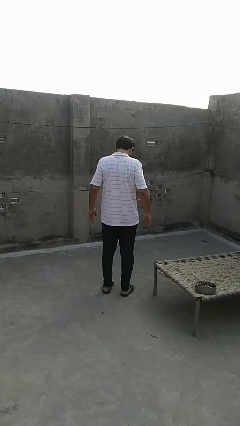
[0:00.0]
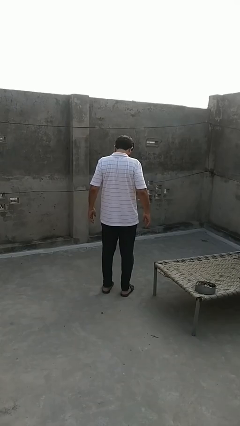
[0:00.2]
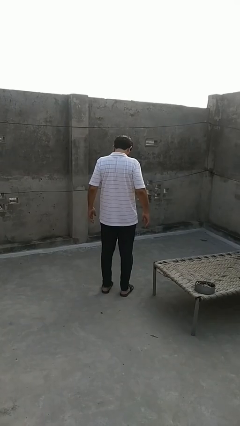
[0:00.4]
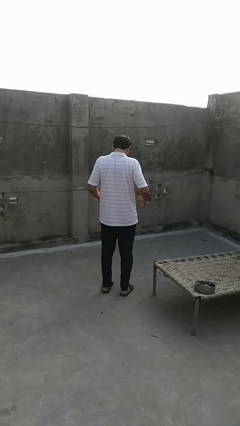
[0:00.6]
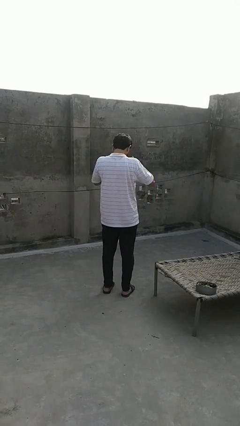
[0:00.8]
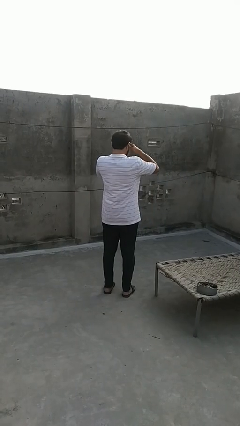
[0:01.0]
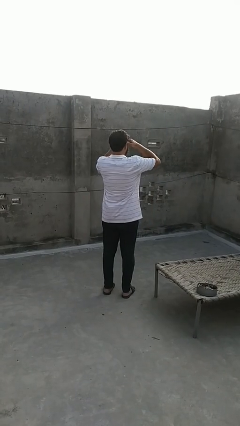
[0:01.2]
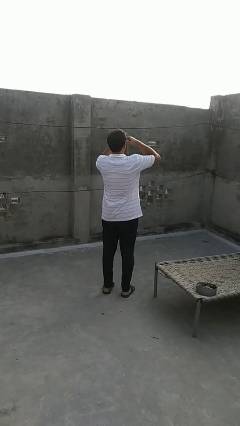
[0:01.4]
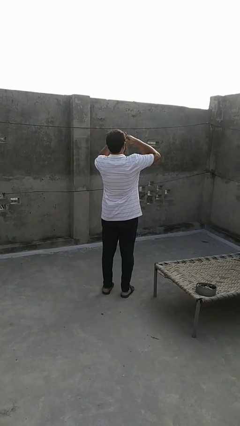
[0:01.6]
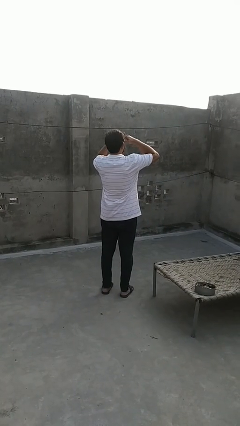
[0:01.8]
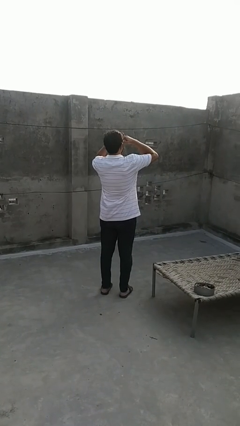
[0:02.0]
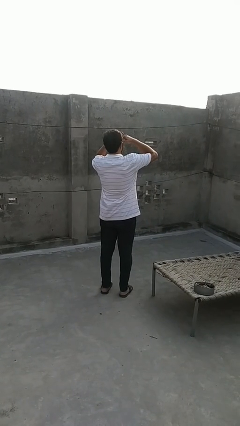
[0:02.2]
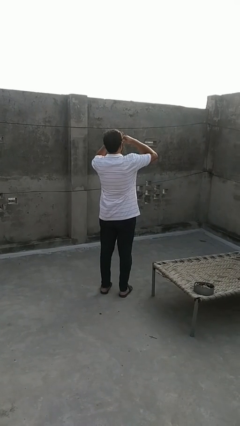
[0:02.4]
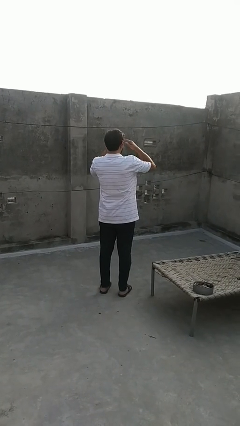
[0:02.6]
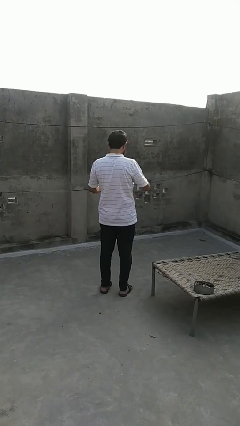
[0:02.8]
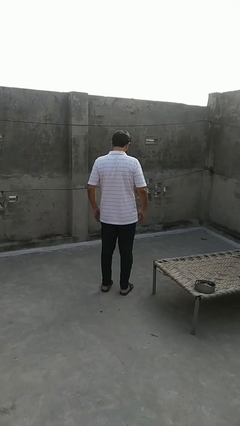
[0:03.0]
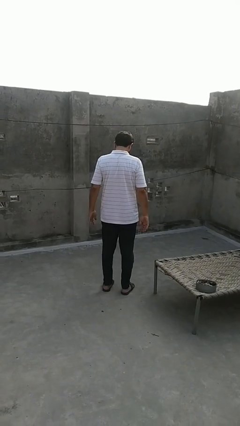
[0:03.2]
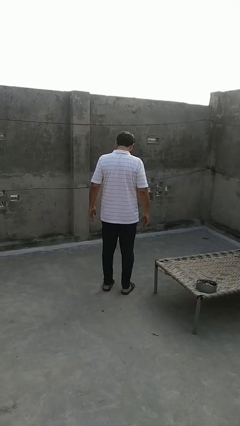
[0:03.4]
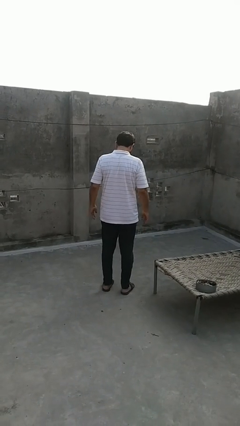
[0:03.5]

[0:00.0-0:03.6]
person shades eyes

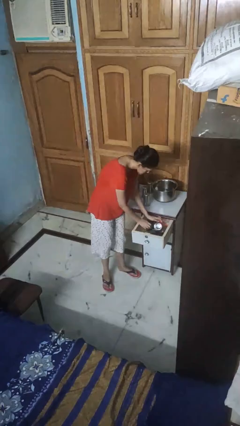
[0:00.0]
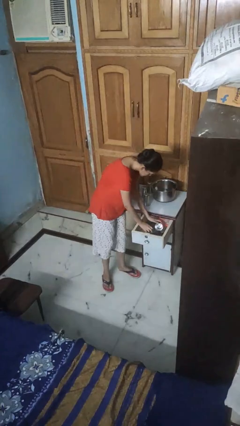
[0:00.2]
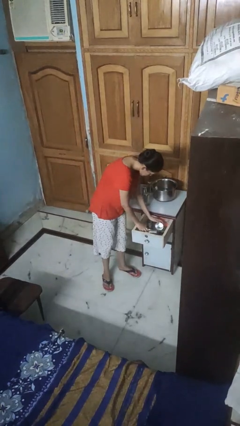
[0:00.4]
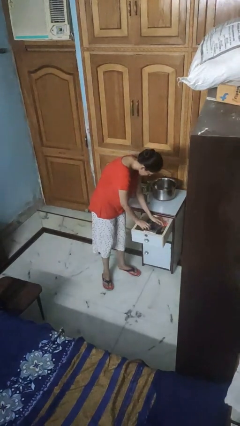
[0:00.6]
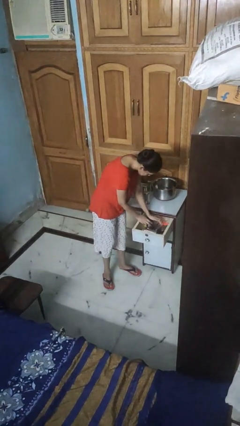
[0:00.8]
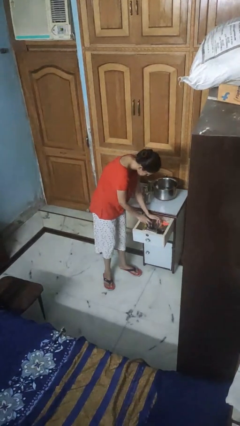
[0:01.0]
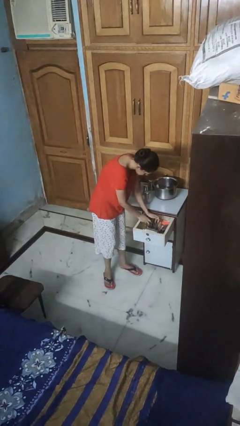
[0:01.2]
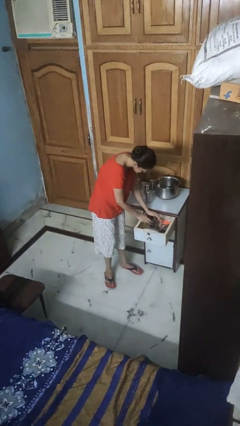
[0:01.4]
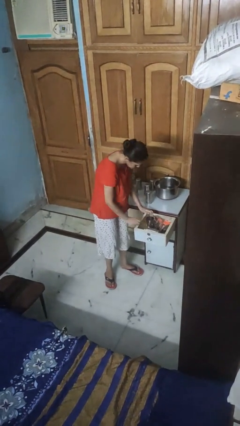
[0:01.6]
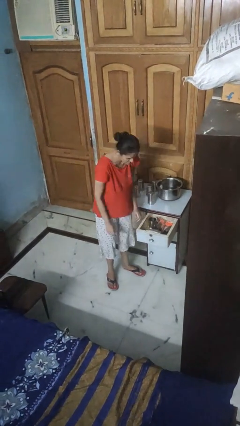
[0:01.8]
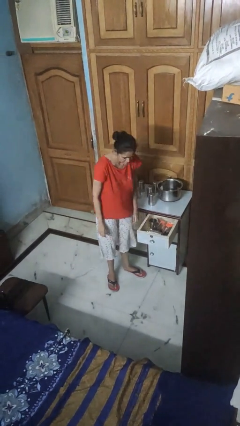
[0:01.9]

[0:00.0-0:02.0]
person searches in kitchen drawer

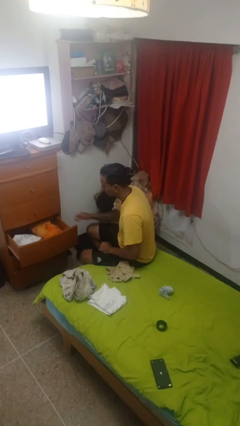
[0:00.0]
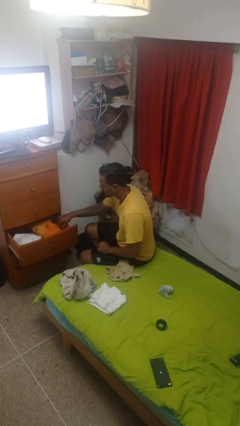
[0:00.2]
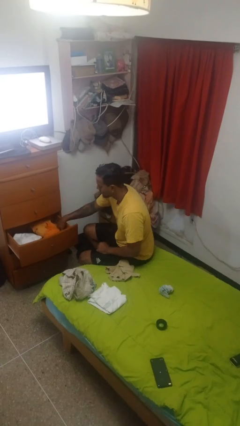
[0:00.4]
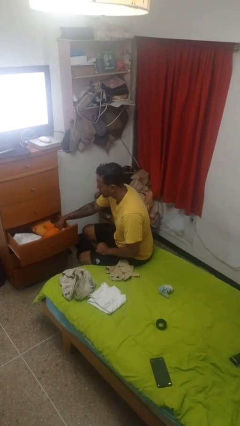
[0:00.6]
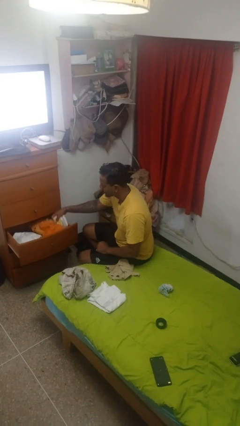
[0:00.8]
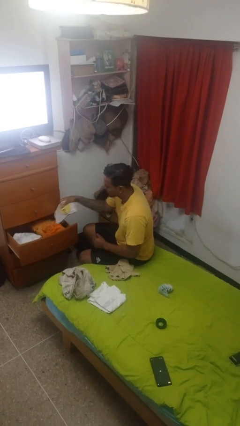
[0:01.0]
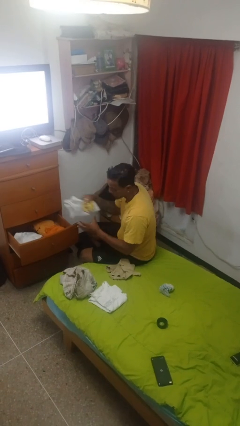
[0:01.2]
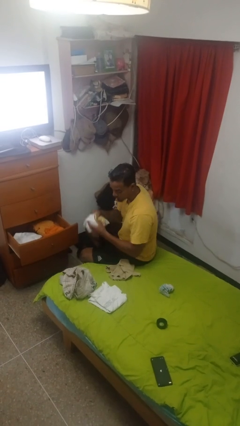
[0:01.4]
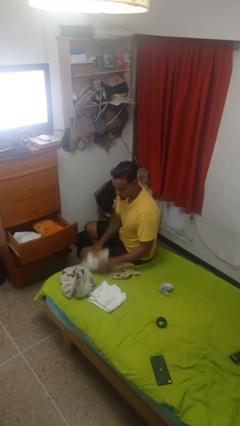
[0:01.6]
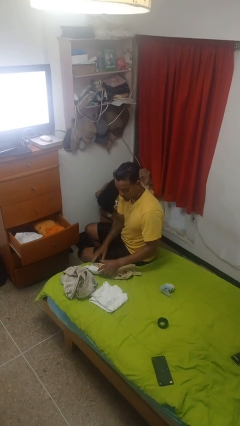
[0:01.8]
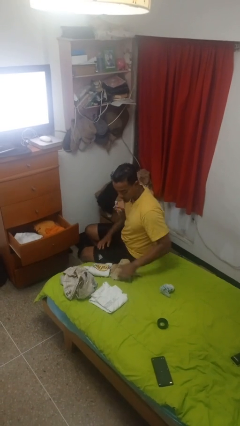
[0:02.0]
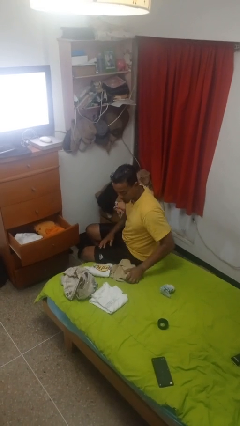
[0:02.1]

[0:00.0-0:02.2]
person takes clothes from dresser

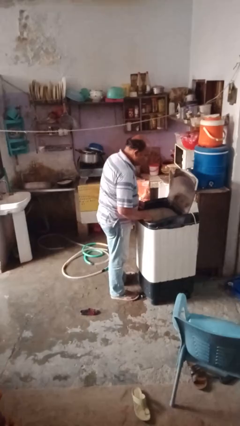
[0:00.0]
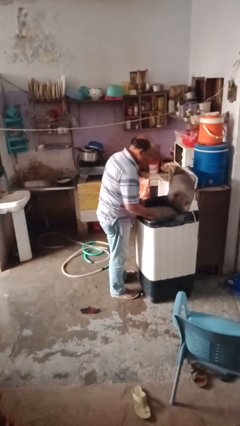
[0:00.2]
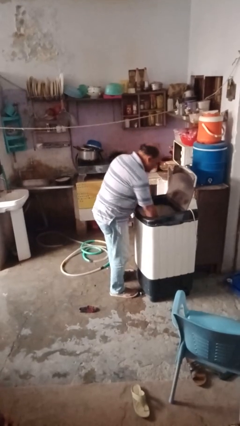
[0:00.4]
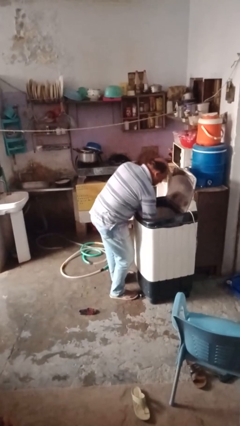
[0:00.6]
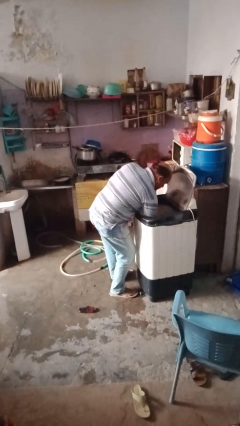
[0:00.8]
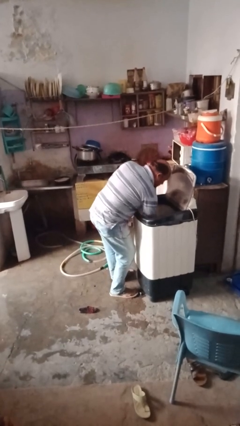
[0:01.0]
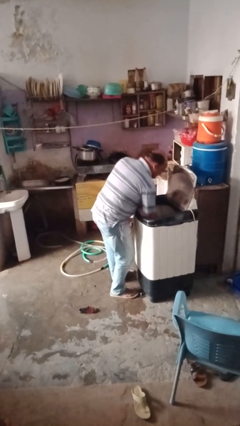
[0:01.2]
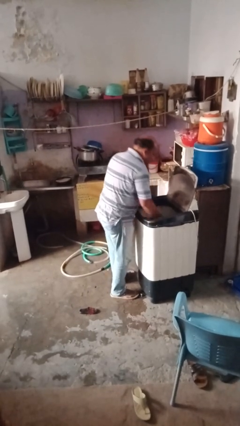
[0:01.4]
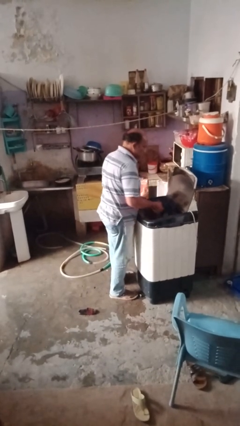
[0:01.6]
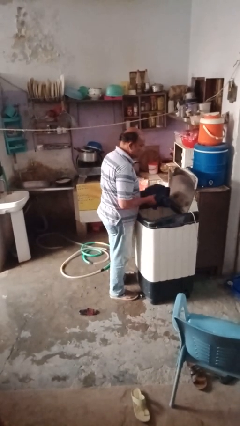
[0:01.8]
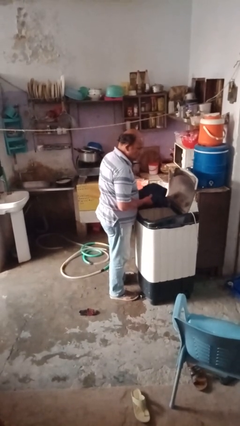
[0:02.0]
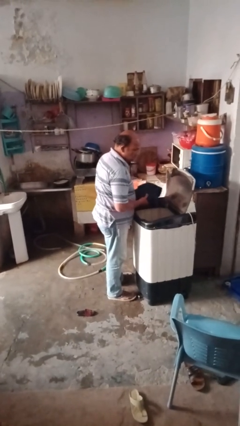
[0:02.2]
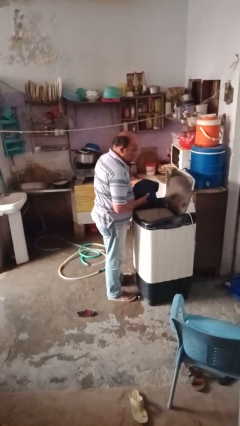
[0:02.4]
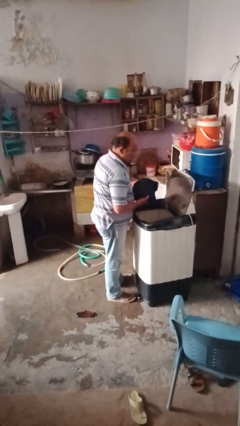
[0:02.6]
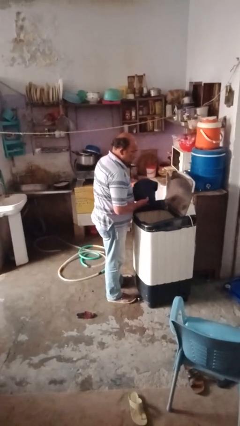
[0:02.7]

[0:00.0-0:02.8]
person unloads clotheswasher

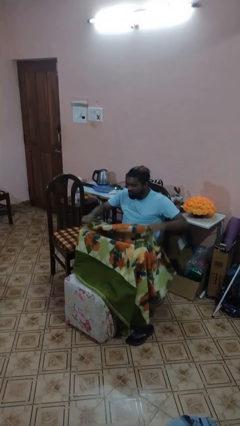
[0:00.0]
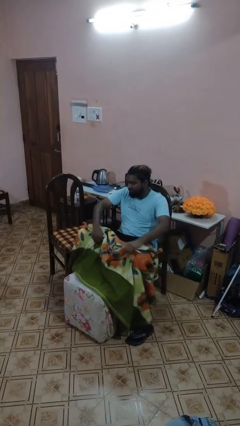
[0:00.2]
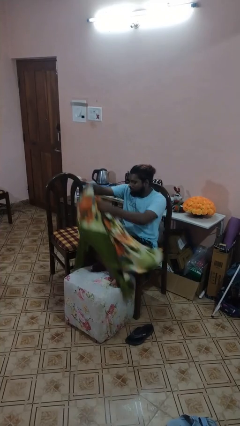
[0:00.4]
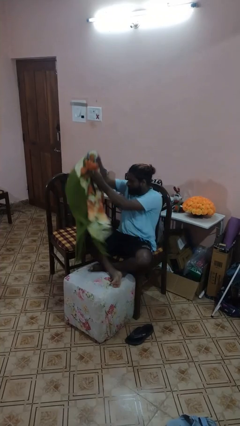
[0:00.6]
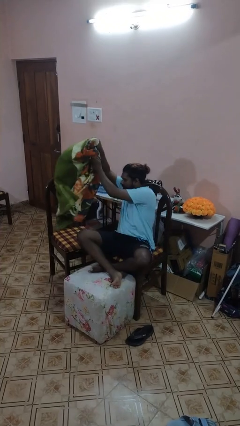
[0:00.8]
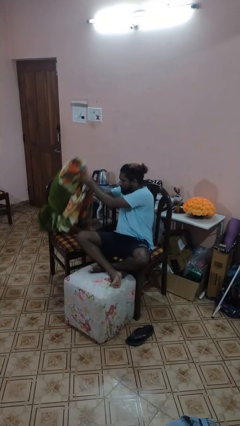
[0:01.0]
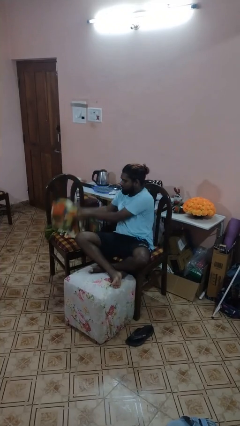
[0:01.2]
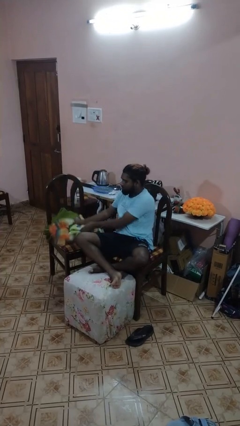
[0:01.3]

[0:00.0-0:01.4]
person uncovers with blanket

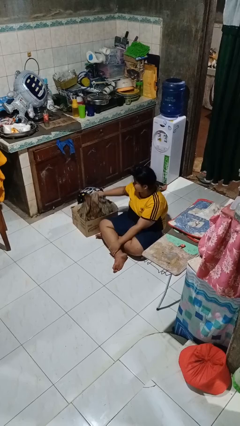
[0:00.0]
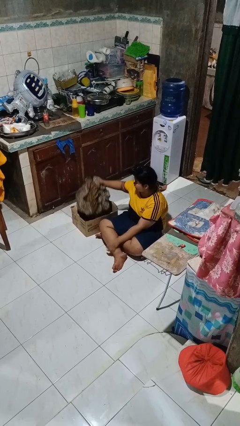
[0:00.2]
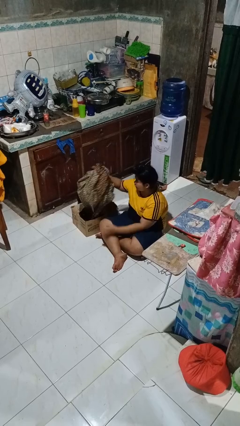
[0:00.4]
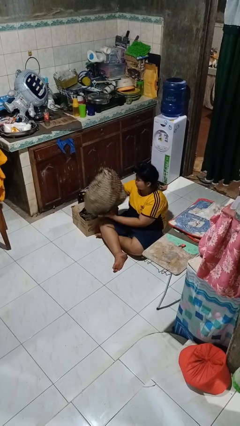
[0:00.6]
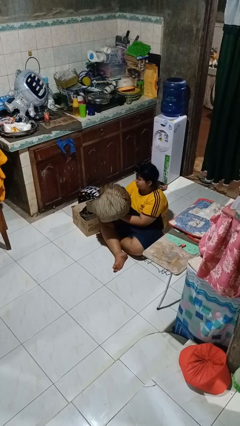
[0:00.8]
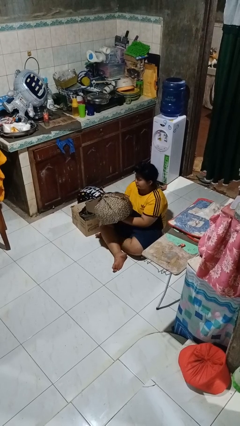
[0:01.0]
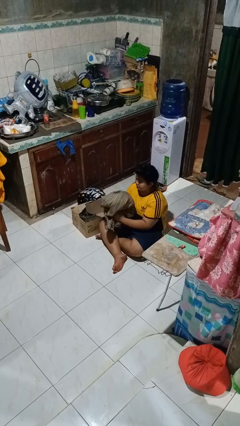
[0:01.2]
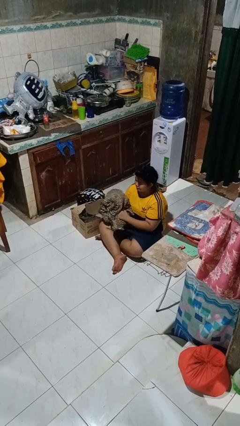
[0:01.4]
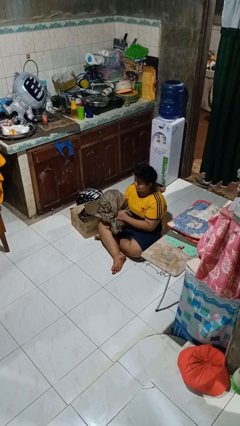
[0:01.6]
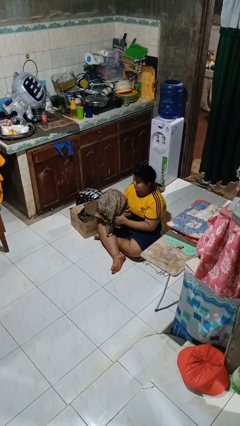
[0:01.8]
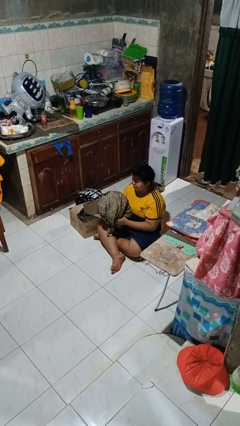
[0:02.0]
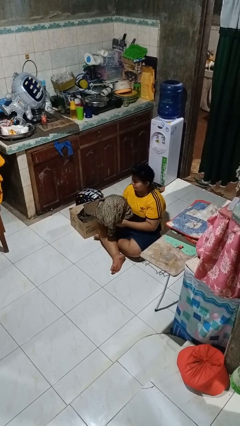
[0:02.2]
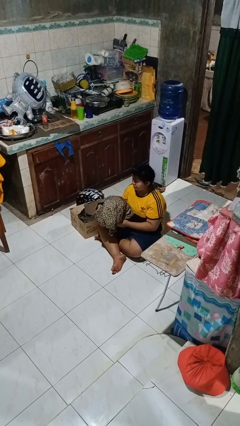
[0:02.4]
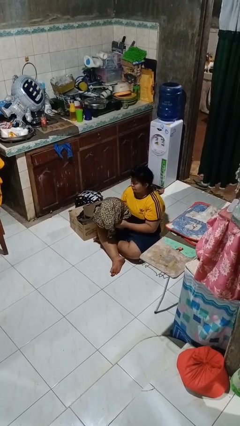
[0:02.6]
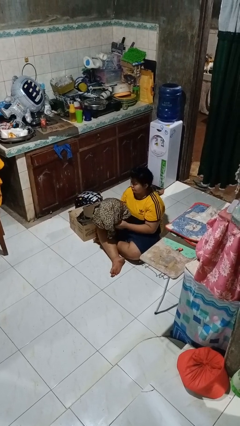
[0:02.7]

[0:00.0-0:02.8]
person takes object from box

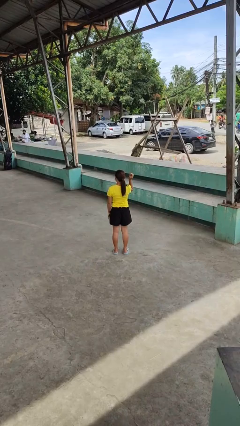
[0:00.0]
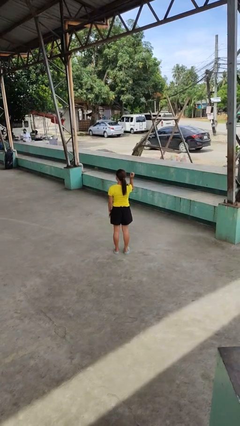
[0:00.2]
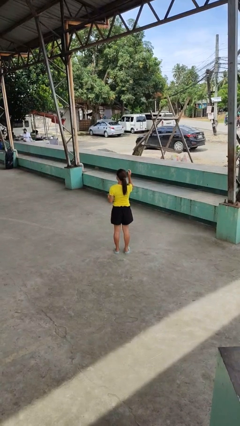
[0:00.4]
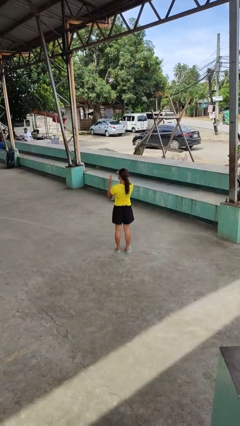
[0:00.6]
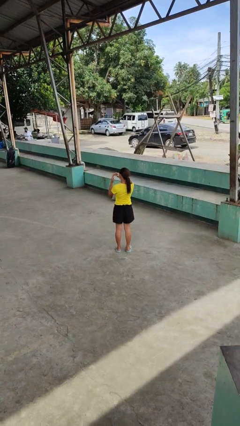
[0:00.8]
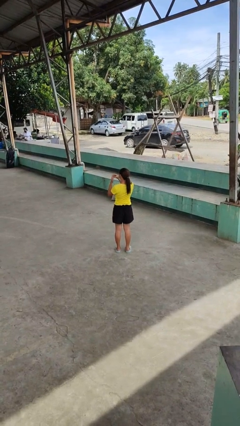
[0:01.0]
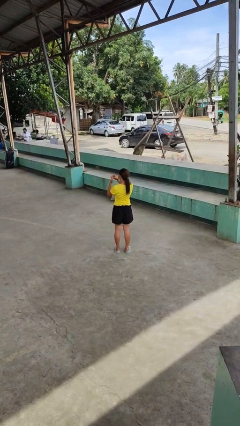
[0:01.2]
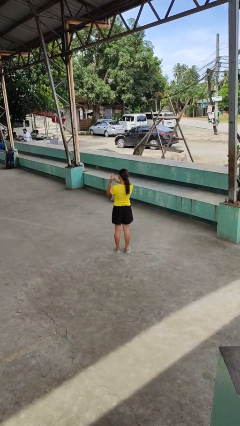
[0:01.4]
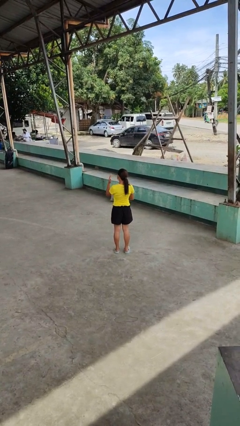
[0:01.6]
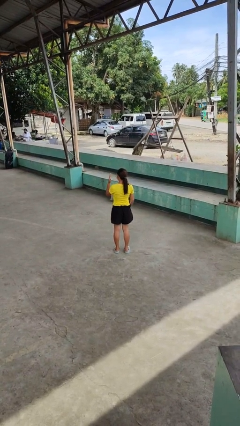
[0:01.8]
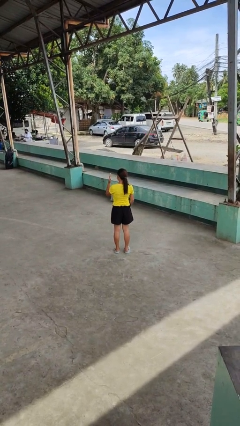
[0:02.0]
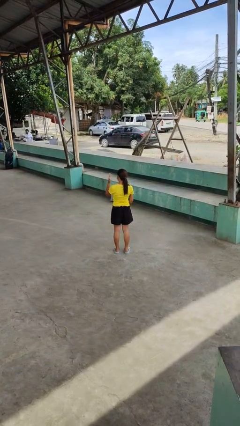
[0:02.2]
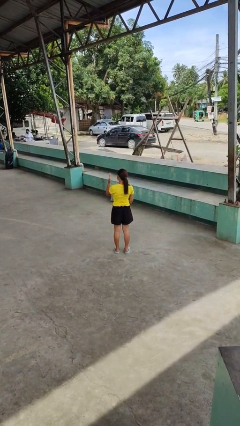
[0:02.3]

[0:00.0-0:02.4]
person puts on ring
